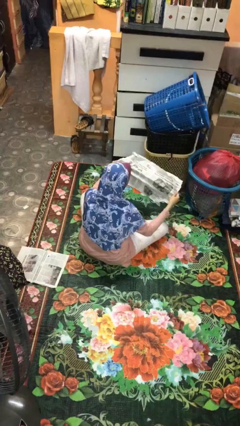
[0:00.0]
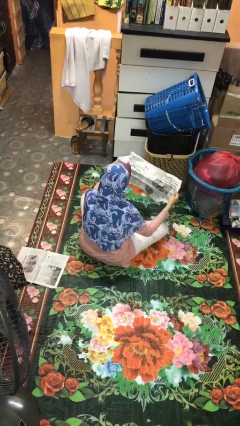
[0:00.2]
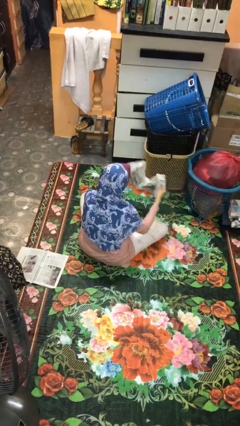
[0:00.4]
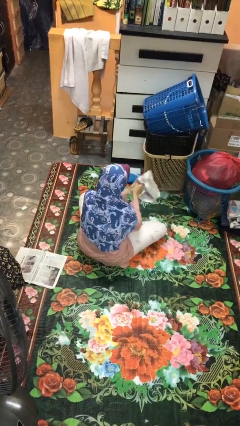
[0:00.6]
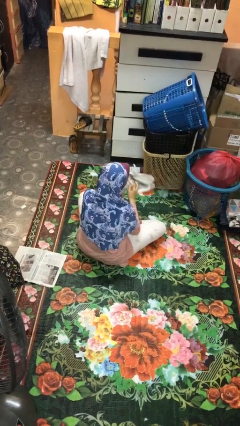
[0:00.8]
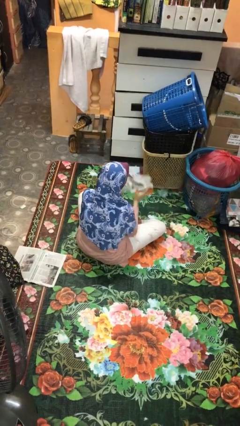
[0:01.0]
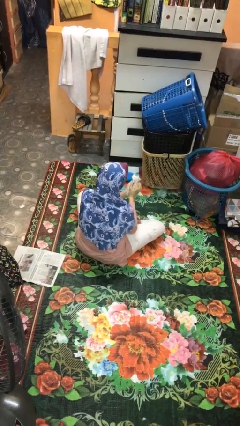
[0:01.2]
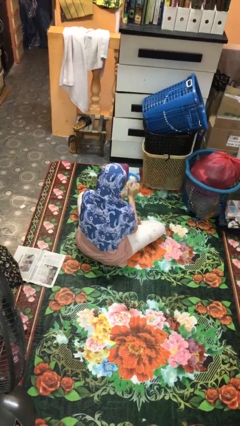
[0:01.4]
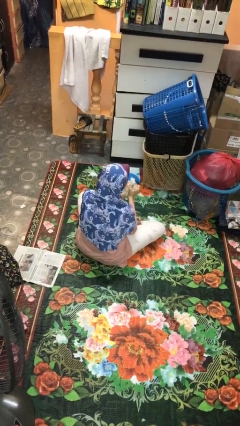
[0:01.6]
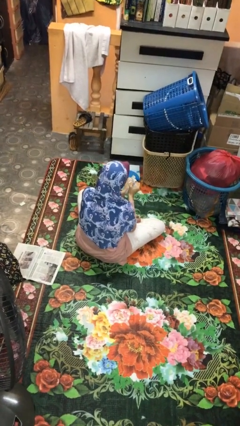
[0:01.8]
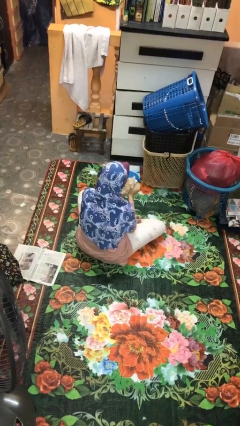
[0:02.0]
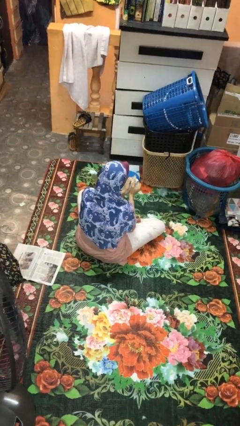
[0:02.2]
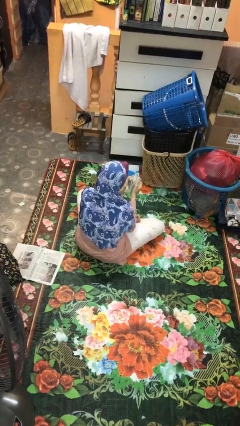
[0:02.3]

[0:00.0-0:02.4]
person crumples paper

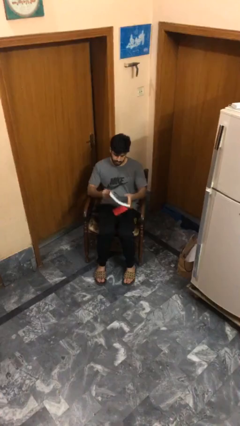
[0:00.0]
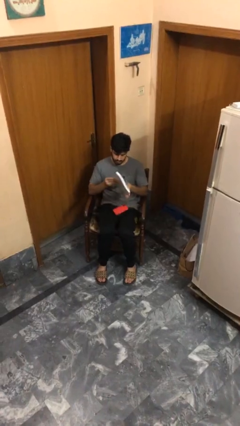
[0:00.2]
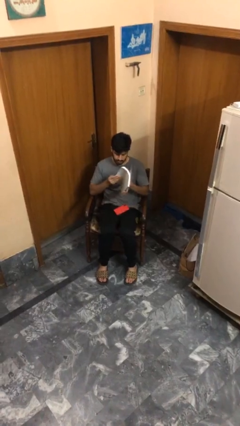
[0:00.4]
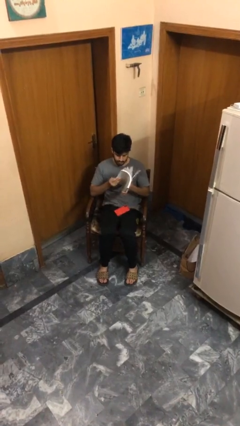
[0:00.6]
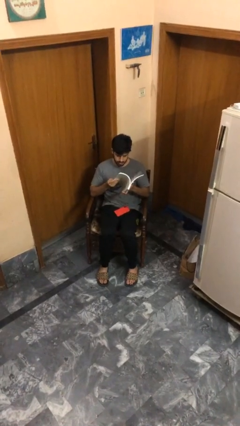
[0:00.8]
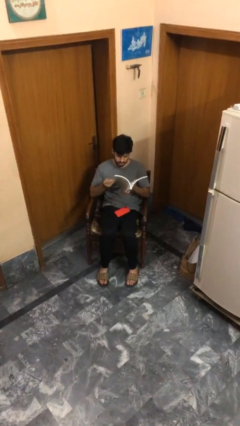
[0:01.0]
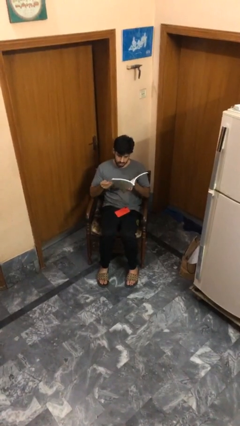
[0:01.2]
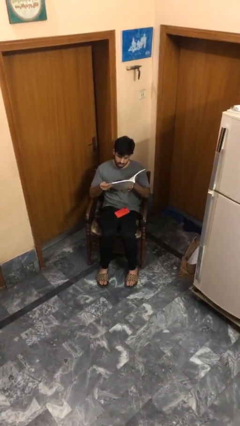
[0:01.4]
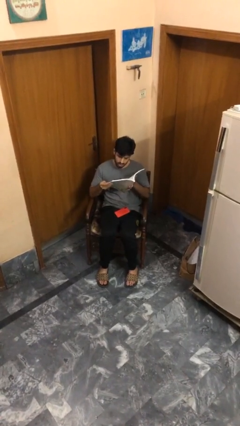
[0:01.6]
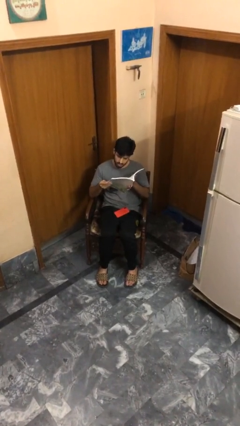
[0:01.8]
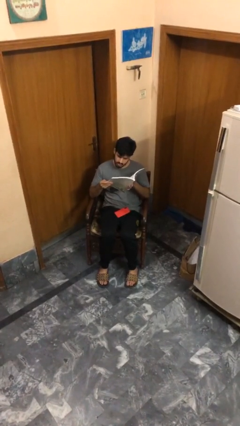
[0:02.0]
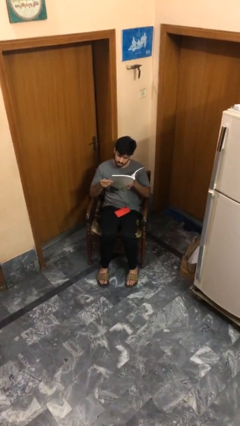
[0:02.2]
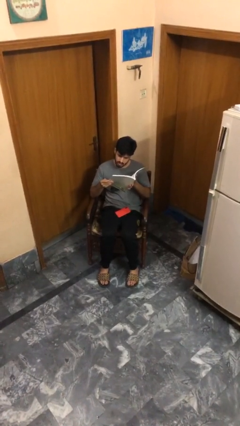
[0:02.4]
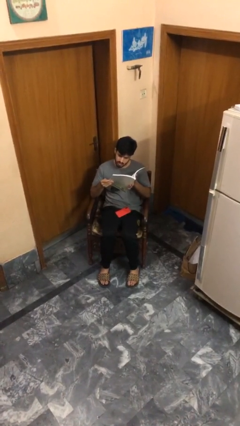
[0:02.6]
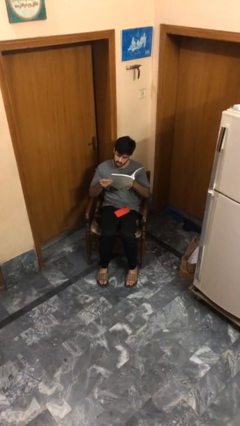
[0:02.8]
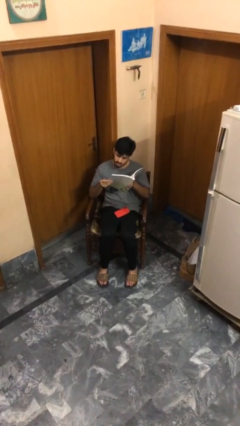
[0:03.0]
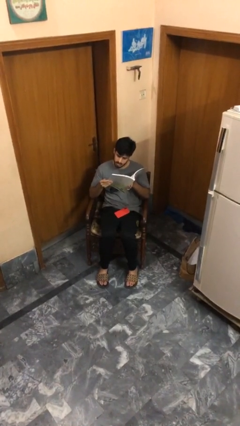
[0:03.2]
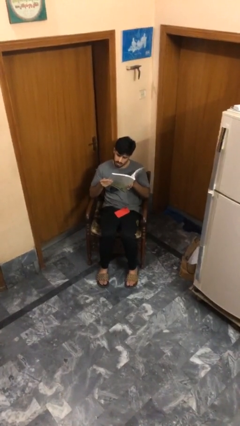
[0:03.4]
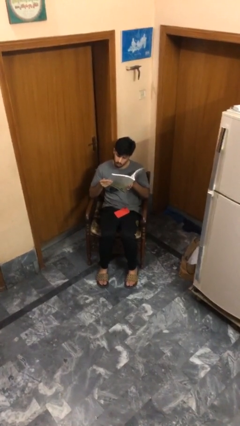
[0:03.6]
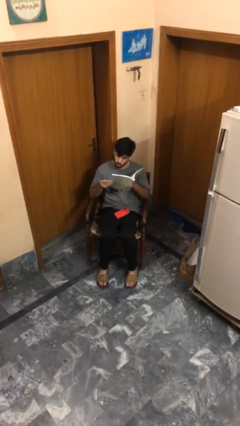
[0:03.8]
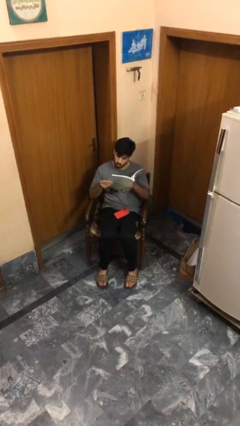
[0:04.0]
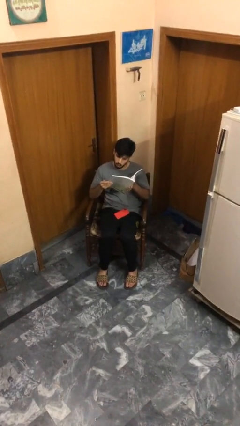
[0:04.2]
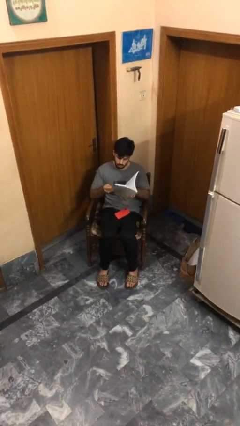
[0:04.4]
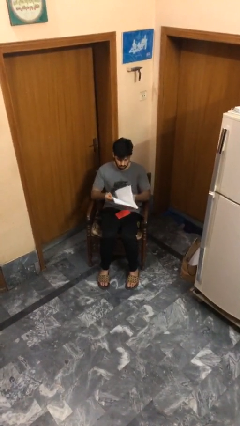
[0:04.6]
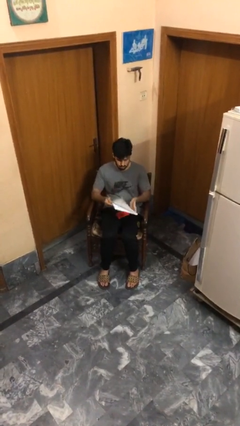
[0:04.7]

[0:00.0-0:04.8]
person reads book

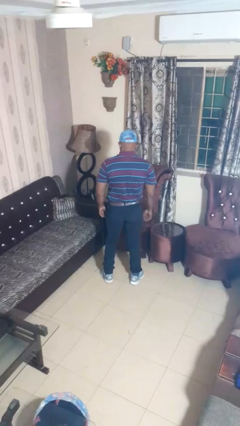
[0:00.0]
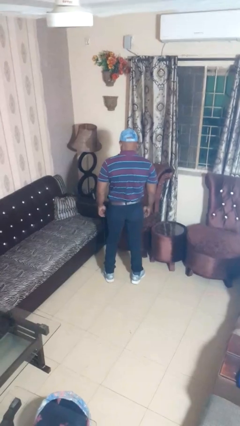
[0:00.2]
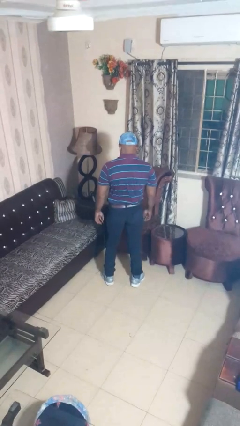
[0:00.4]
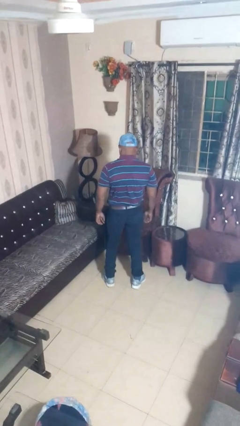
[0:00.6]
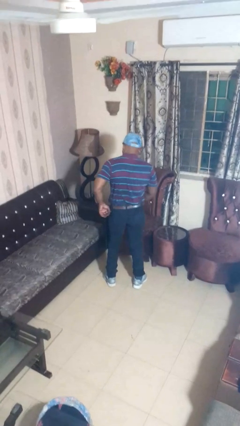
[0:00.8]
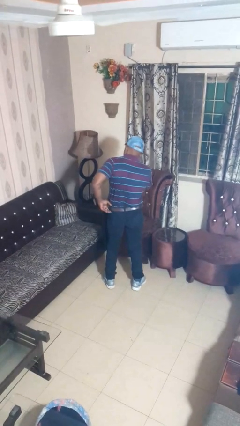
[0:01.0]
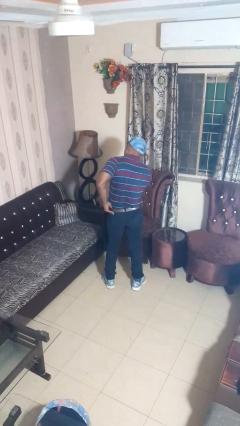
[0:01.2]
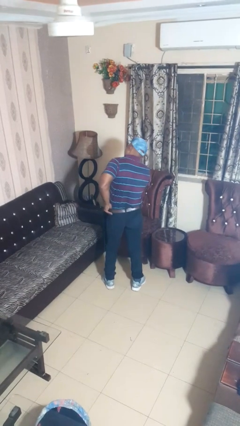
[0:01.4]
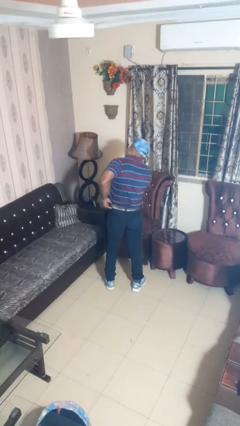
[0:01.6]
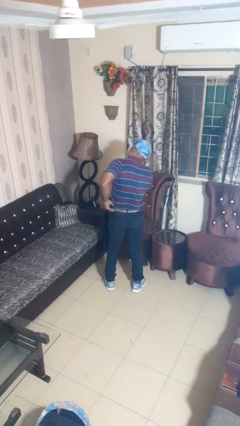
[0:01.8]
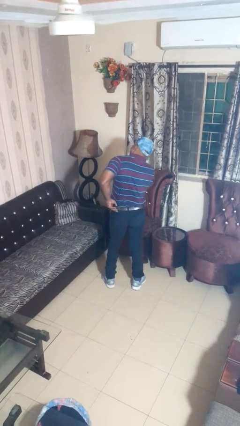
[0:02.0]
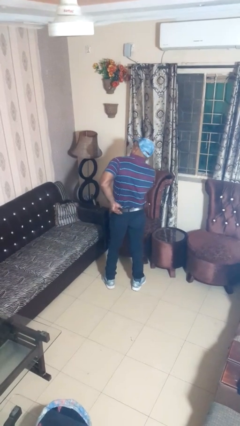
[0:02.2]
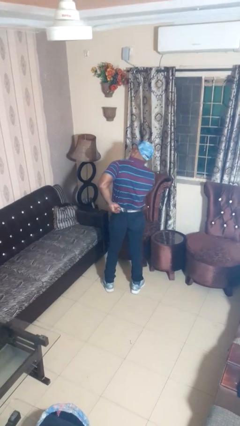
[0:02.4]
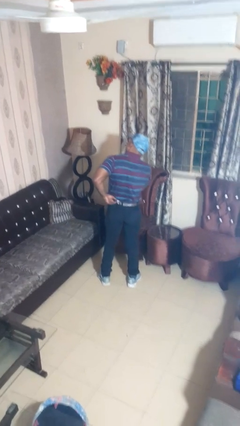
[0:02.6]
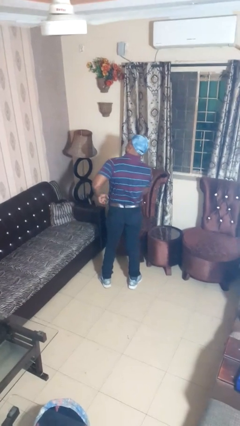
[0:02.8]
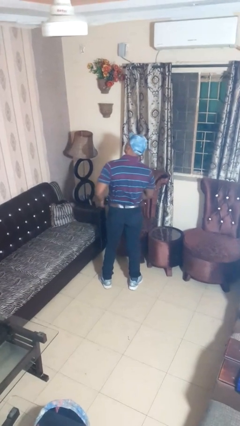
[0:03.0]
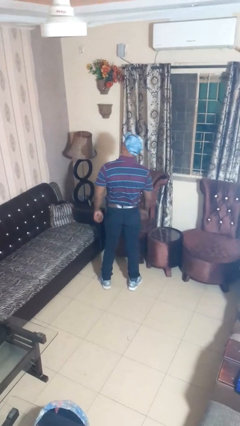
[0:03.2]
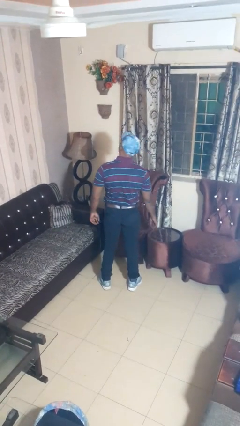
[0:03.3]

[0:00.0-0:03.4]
person hikes up pants

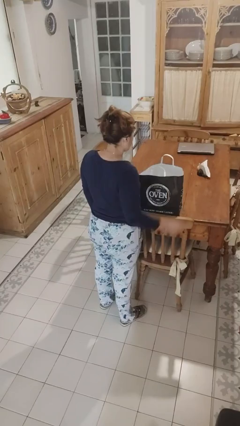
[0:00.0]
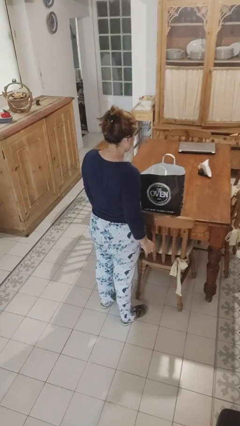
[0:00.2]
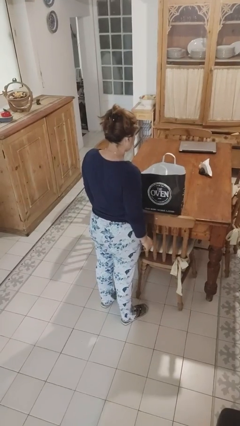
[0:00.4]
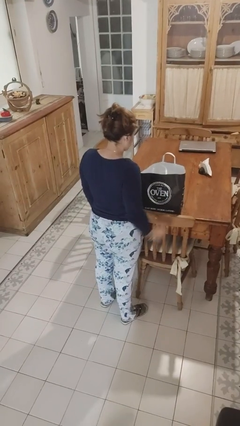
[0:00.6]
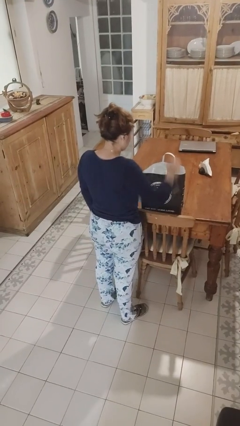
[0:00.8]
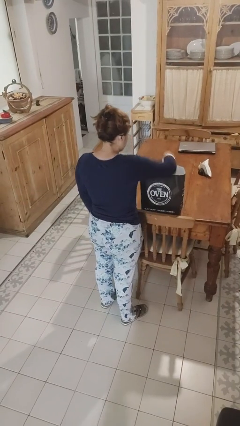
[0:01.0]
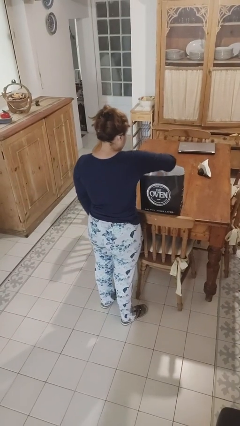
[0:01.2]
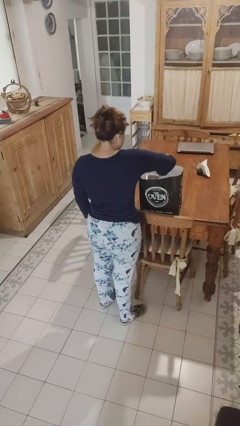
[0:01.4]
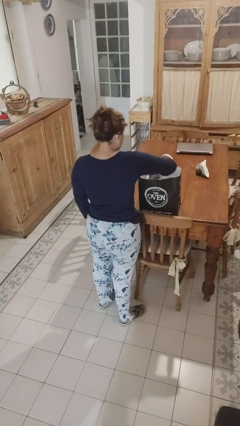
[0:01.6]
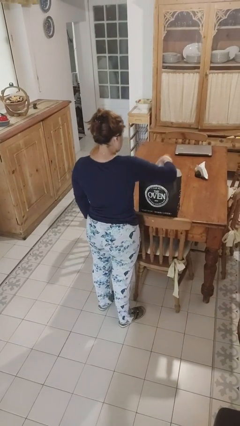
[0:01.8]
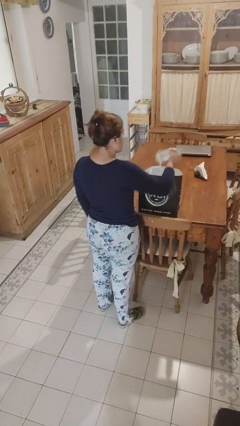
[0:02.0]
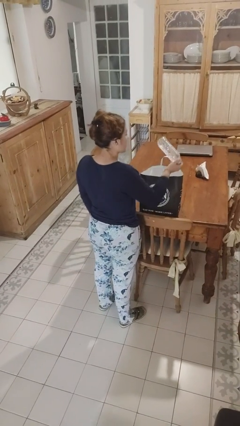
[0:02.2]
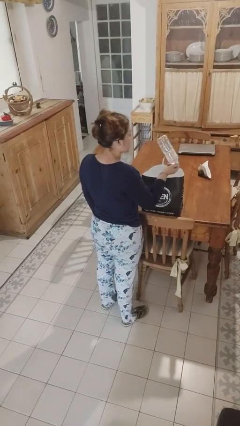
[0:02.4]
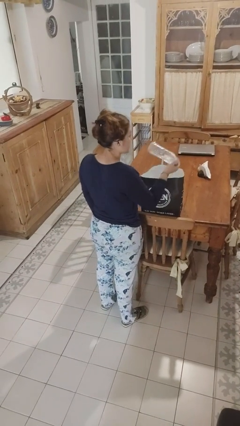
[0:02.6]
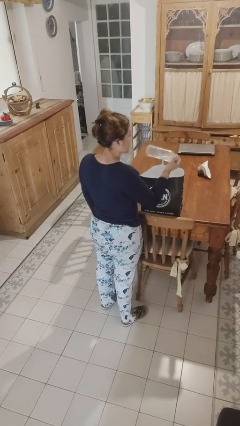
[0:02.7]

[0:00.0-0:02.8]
person takes object from bag

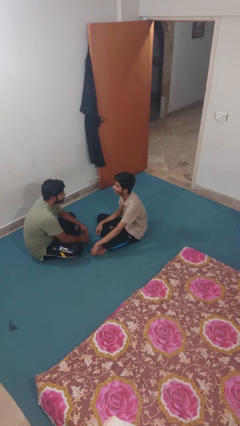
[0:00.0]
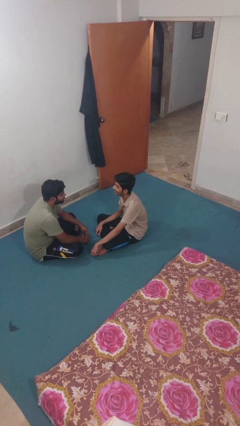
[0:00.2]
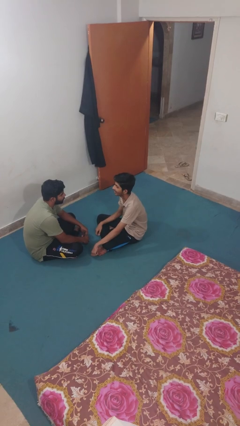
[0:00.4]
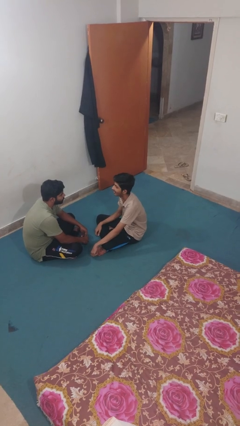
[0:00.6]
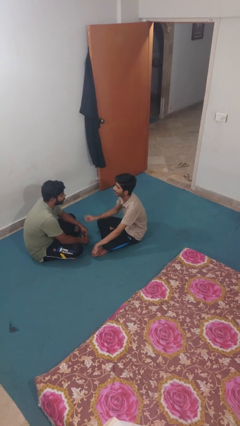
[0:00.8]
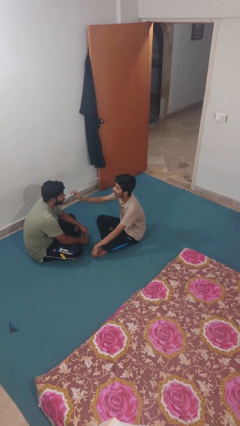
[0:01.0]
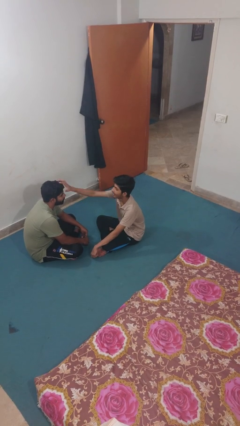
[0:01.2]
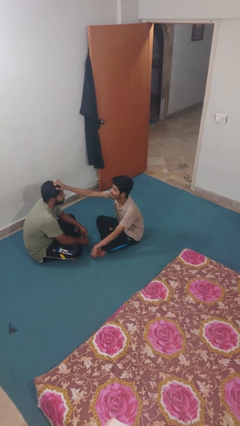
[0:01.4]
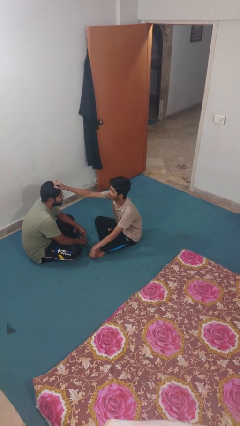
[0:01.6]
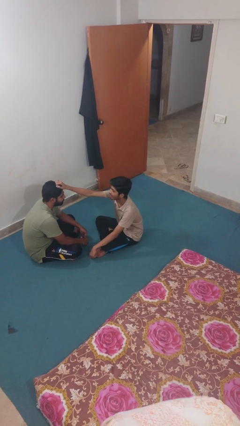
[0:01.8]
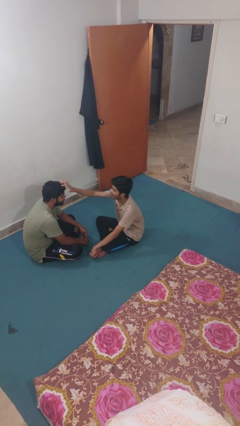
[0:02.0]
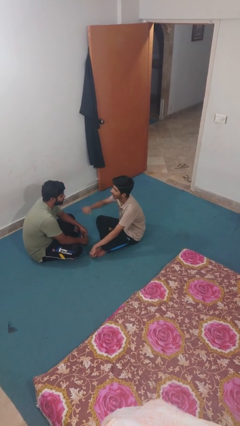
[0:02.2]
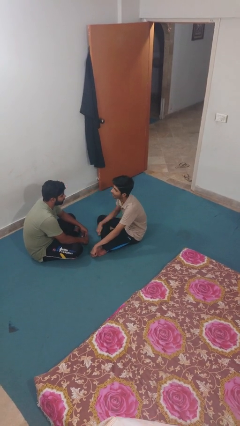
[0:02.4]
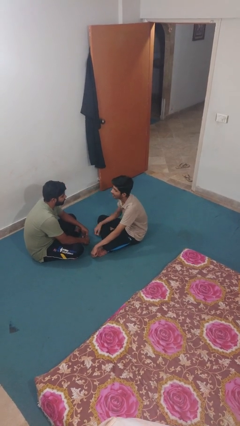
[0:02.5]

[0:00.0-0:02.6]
person grabs person by hair

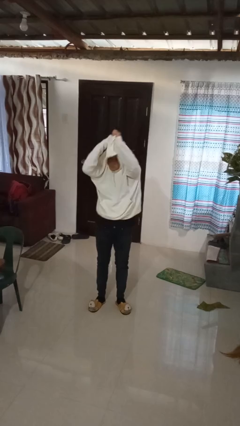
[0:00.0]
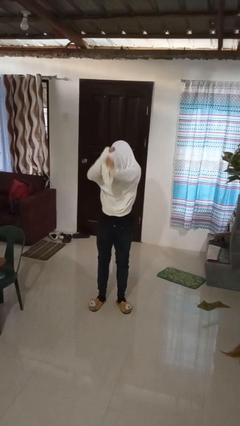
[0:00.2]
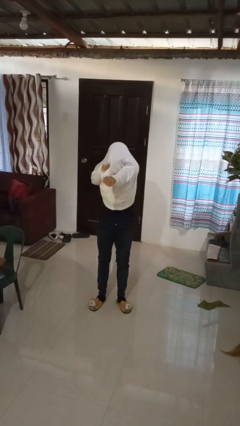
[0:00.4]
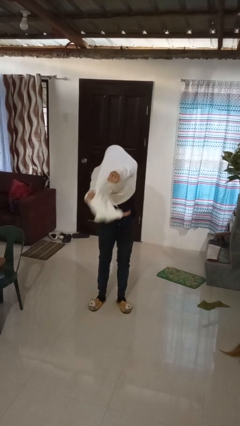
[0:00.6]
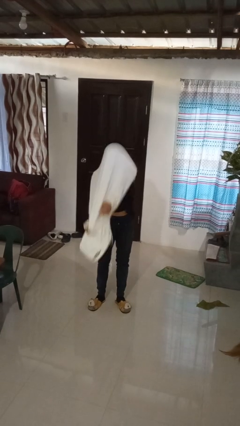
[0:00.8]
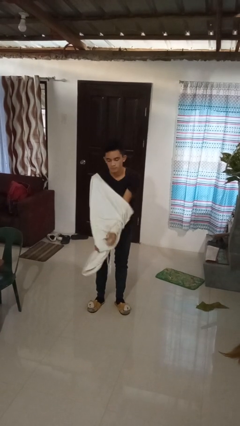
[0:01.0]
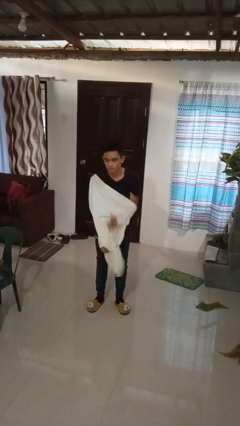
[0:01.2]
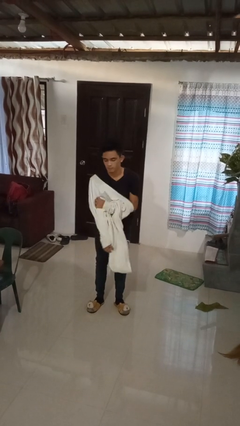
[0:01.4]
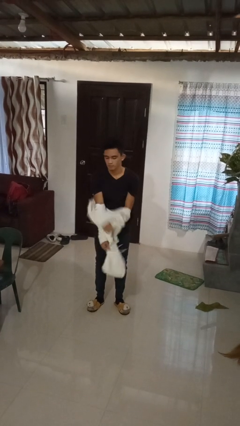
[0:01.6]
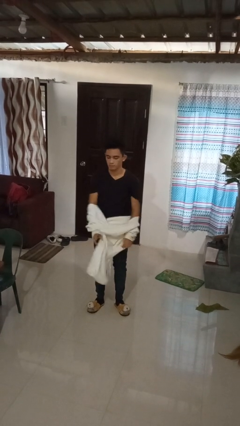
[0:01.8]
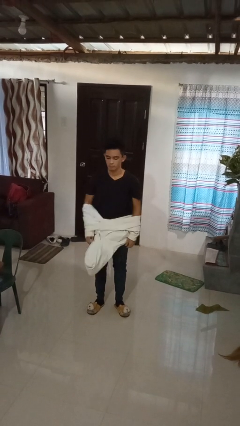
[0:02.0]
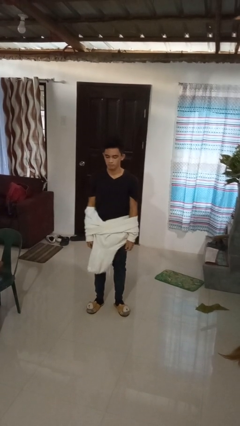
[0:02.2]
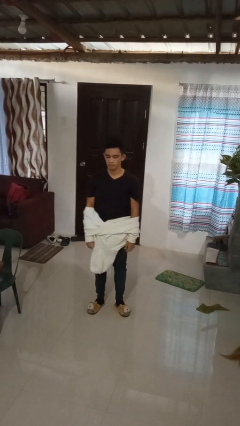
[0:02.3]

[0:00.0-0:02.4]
person takes off hoodie
